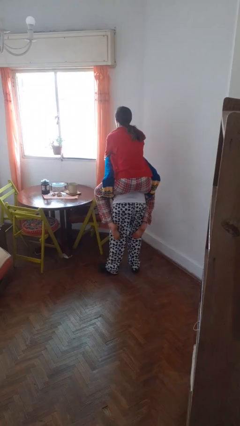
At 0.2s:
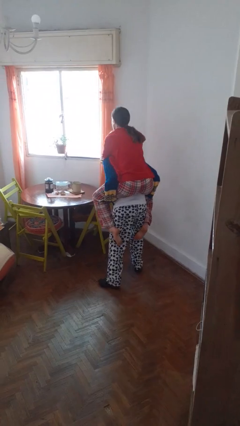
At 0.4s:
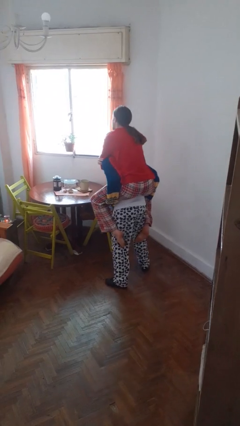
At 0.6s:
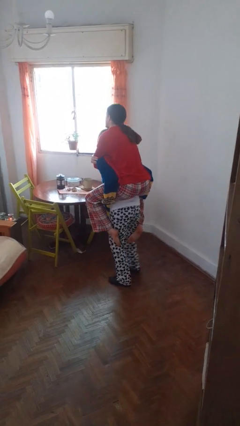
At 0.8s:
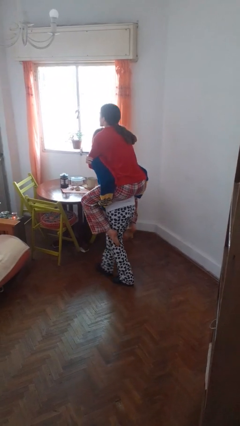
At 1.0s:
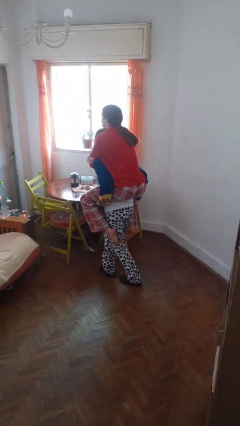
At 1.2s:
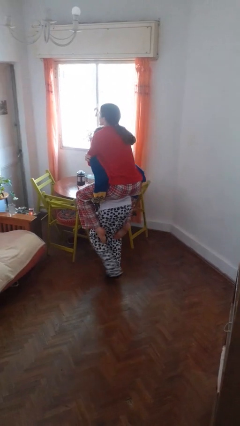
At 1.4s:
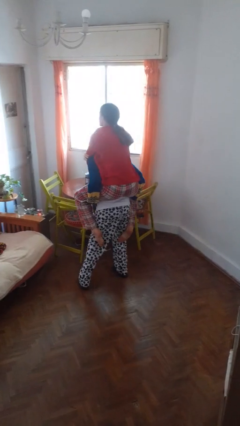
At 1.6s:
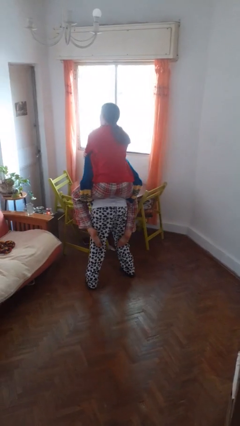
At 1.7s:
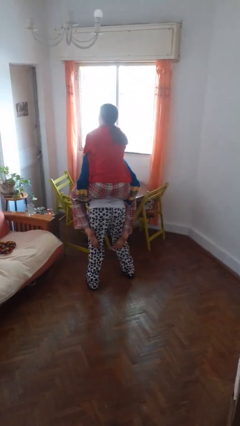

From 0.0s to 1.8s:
person carries person on back

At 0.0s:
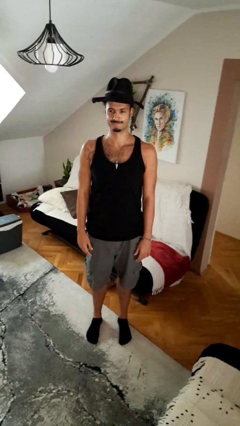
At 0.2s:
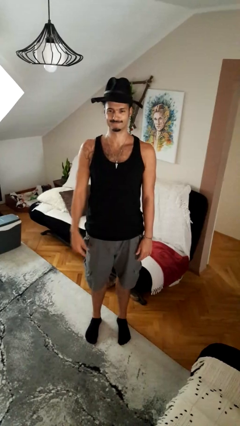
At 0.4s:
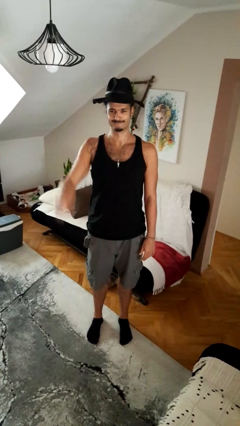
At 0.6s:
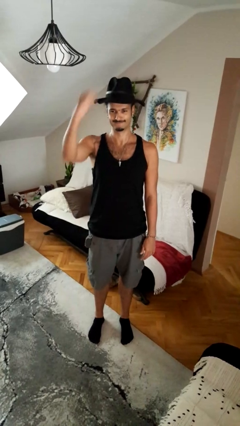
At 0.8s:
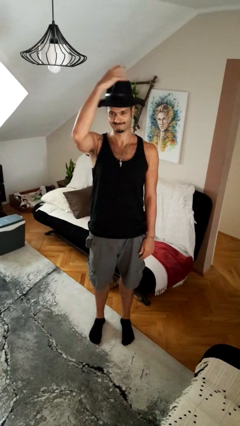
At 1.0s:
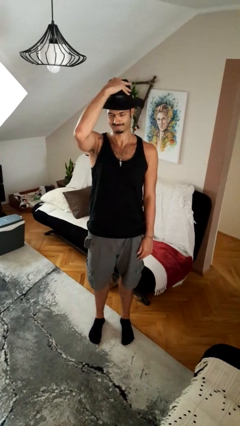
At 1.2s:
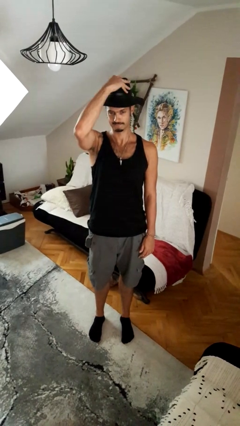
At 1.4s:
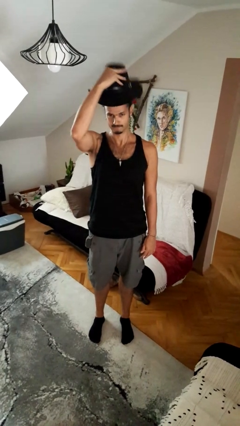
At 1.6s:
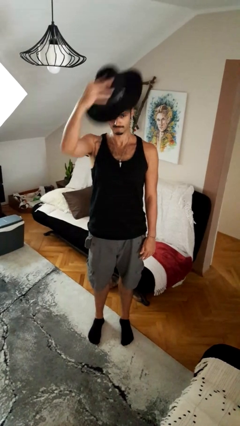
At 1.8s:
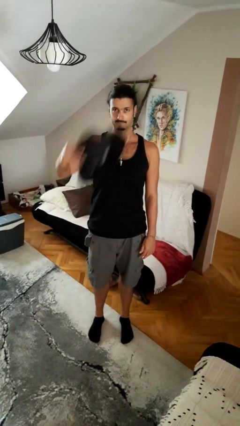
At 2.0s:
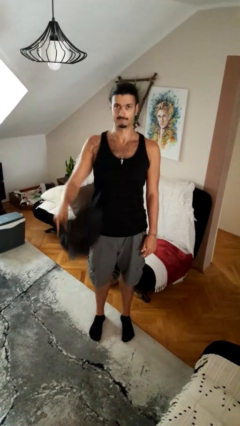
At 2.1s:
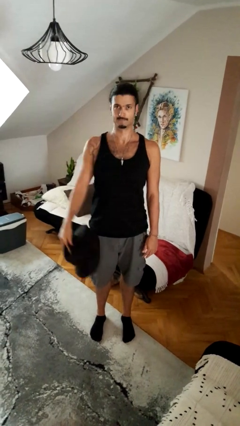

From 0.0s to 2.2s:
person takes off hat

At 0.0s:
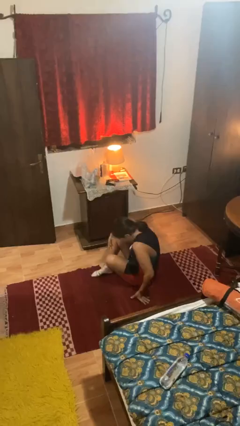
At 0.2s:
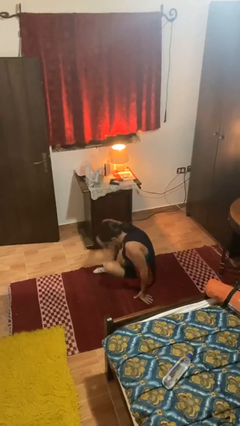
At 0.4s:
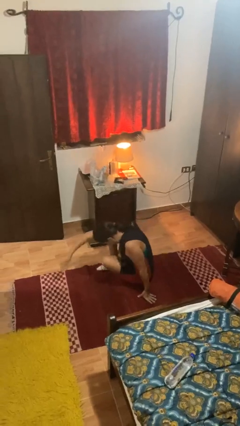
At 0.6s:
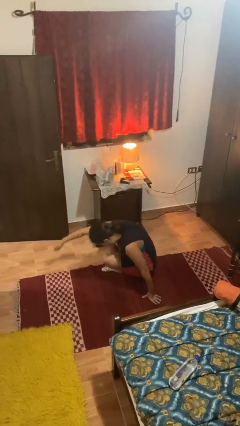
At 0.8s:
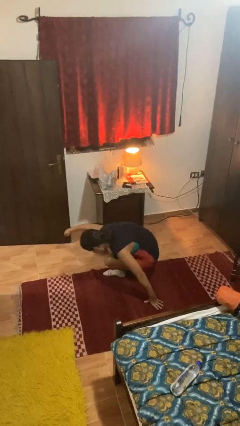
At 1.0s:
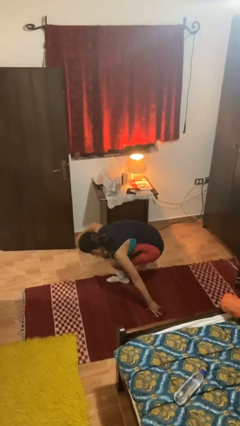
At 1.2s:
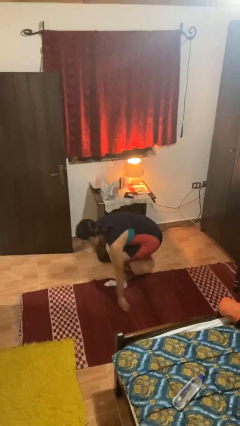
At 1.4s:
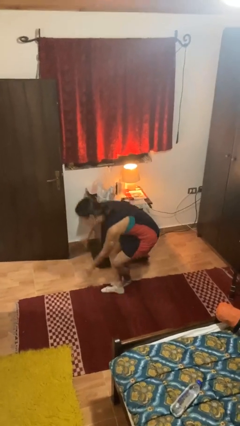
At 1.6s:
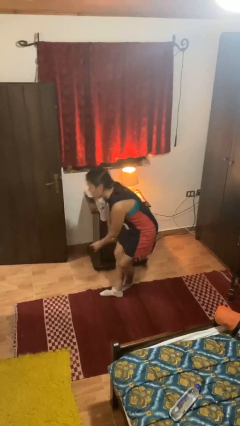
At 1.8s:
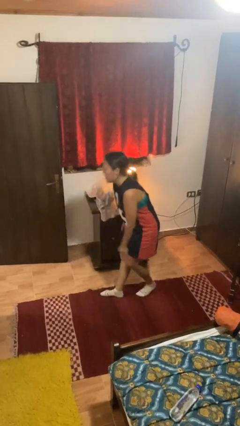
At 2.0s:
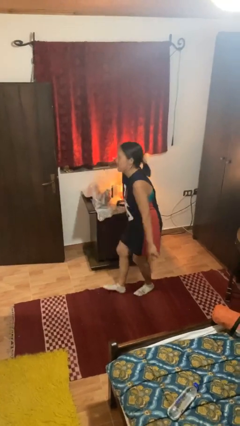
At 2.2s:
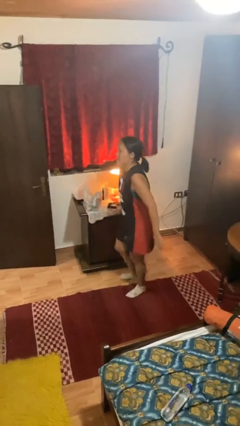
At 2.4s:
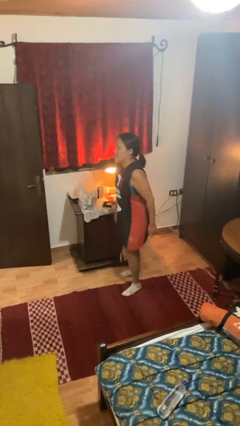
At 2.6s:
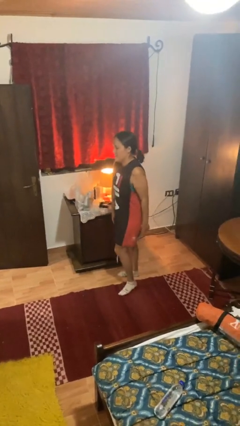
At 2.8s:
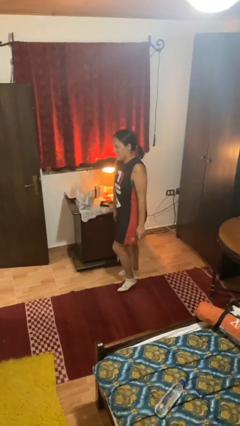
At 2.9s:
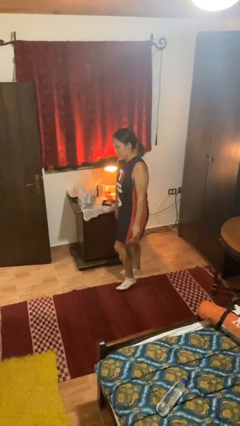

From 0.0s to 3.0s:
person stands up from floor

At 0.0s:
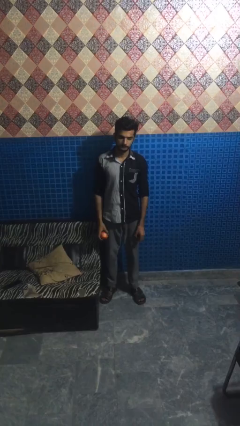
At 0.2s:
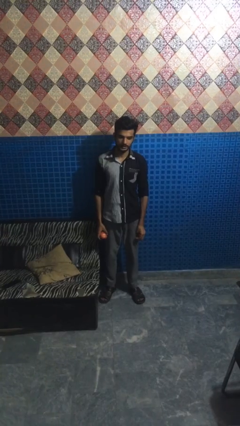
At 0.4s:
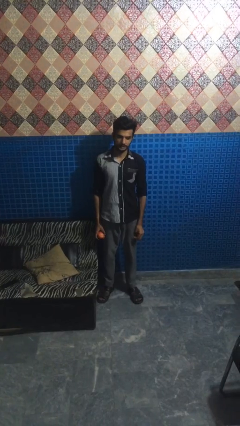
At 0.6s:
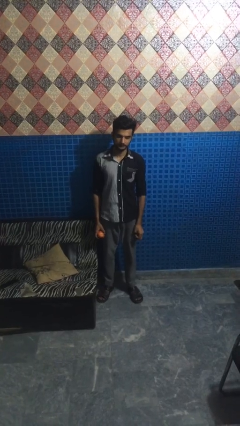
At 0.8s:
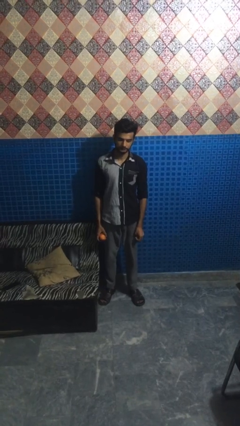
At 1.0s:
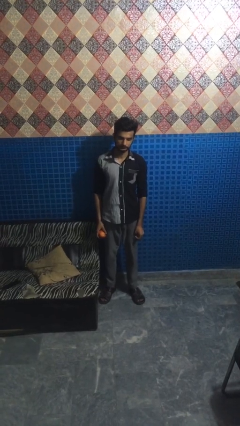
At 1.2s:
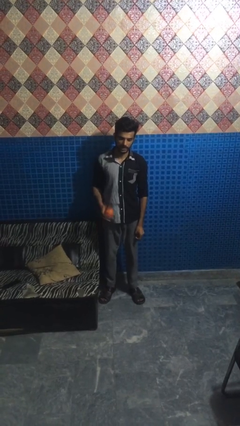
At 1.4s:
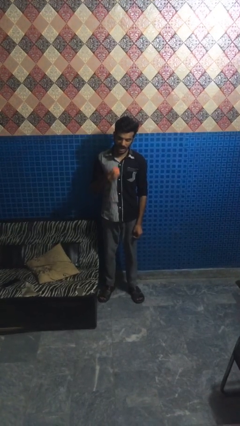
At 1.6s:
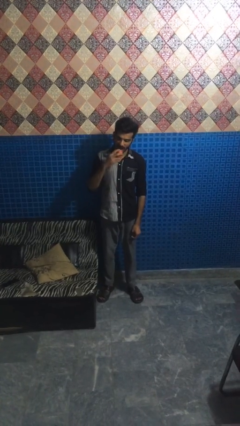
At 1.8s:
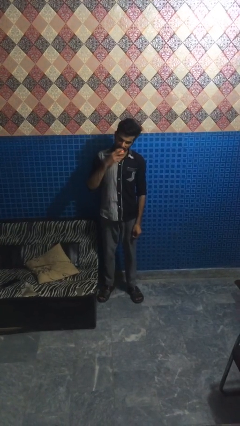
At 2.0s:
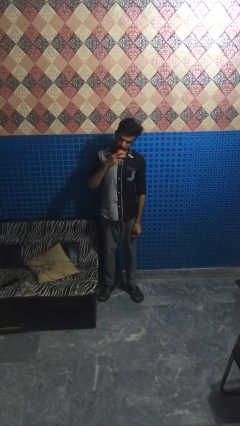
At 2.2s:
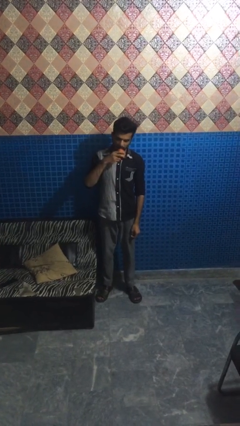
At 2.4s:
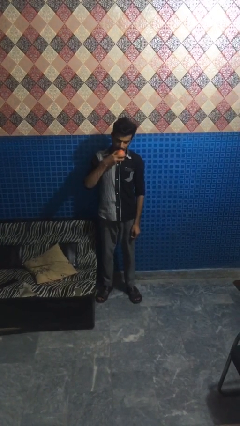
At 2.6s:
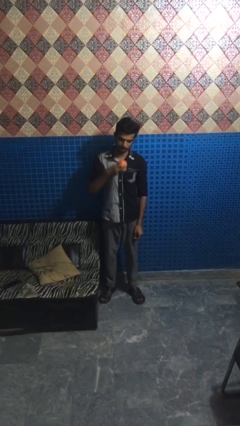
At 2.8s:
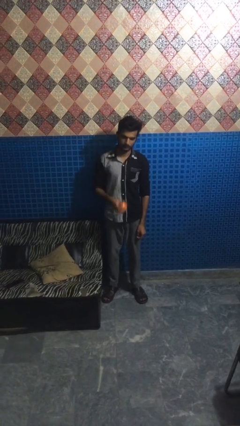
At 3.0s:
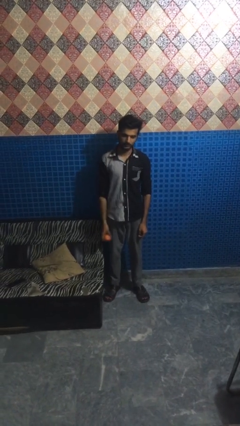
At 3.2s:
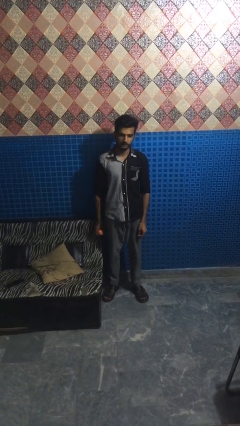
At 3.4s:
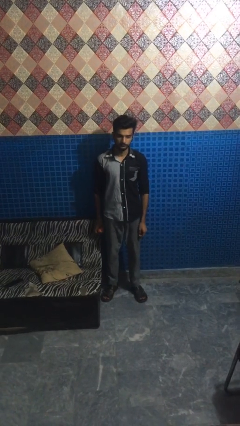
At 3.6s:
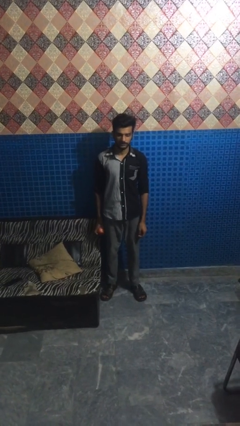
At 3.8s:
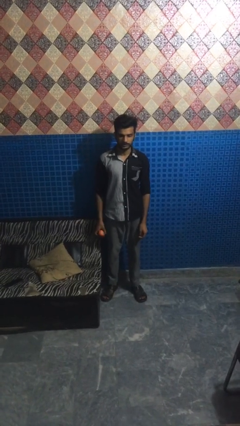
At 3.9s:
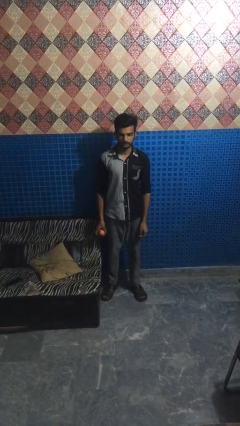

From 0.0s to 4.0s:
person eats apple

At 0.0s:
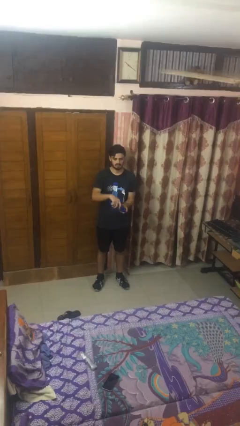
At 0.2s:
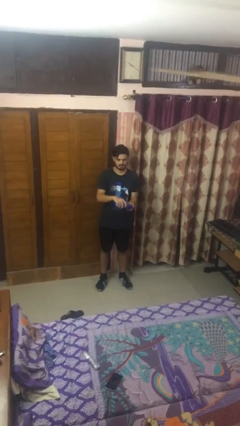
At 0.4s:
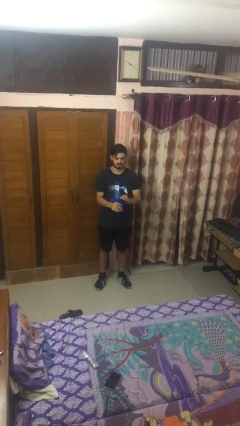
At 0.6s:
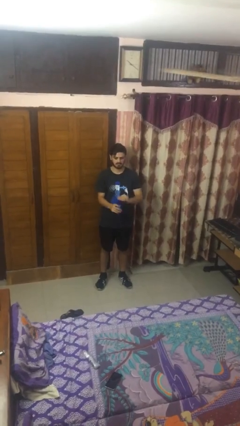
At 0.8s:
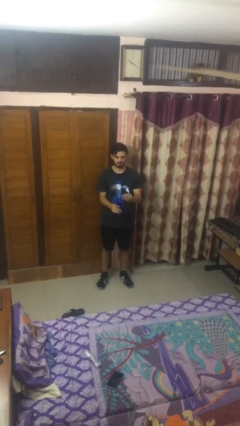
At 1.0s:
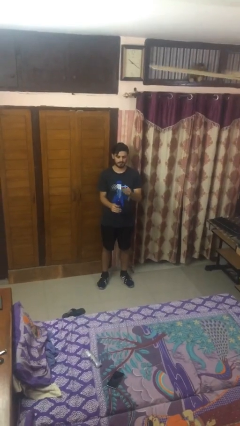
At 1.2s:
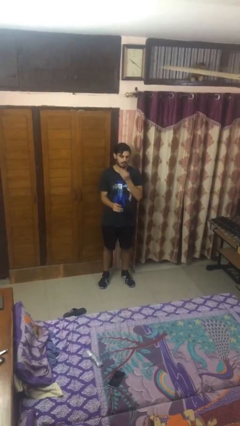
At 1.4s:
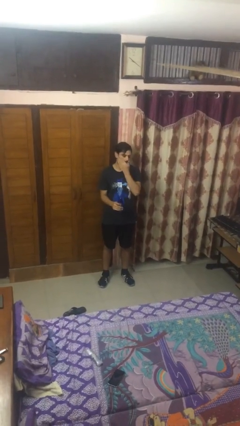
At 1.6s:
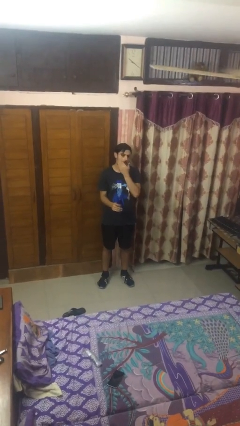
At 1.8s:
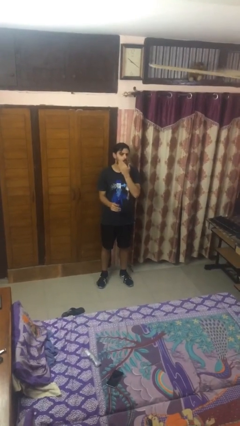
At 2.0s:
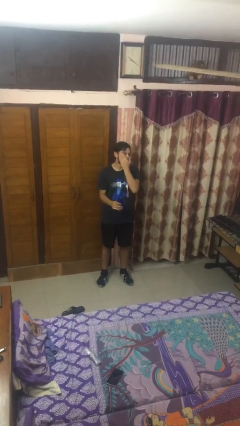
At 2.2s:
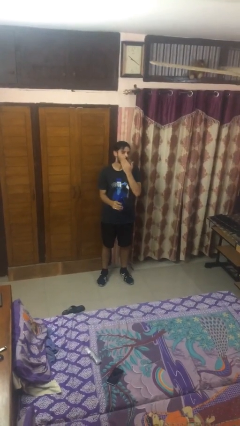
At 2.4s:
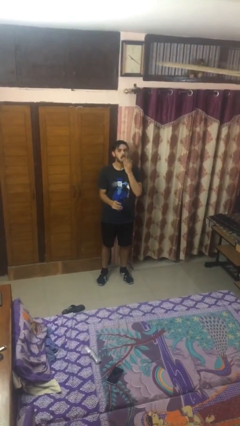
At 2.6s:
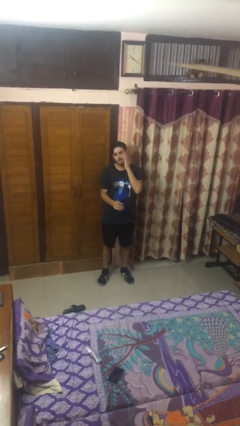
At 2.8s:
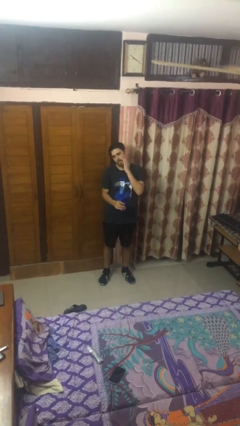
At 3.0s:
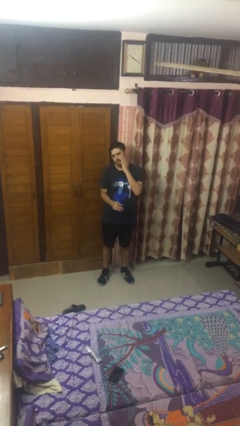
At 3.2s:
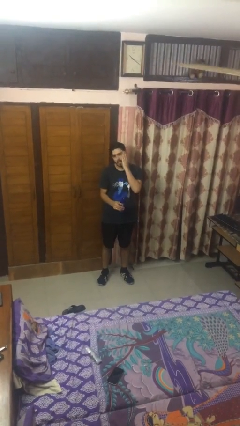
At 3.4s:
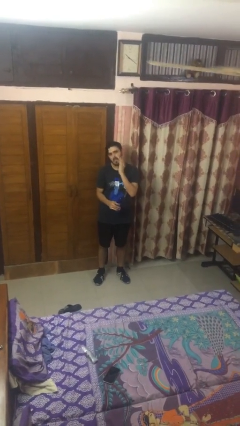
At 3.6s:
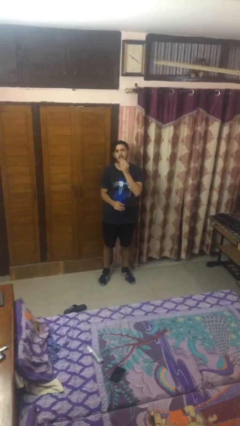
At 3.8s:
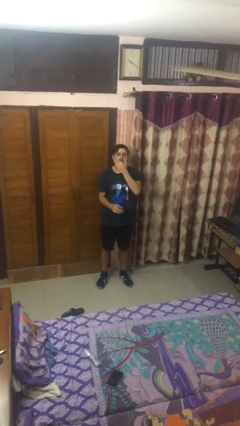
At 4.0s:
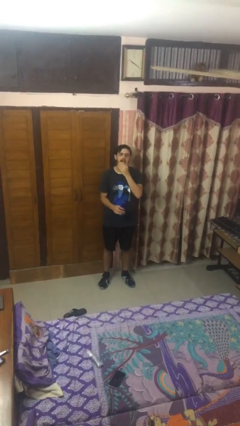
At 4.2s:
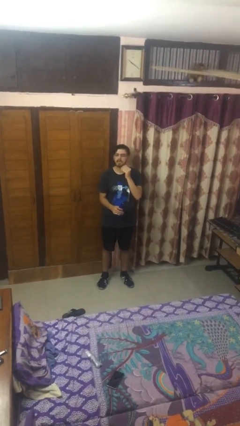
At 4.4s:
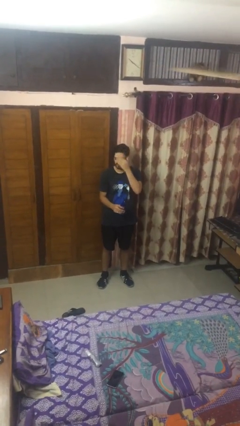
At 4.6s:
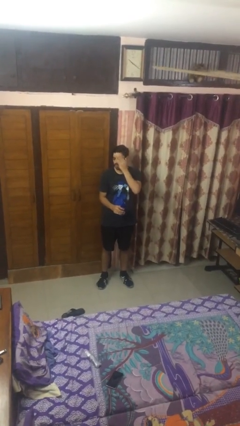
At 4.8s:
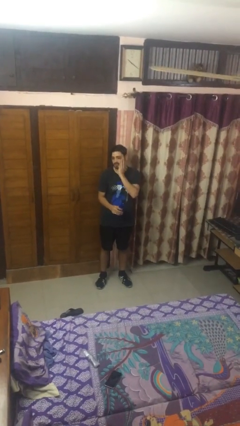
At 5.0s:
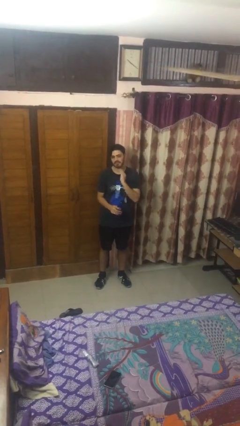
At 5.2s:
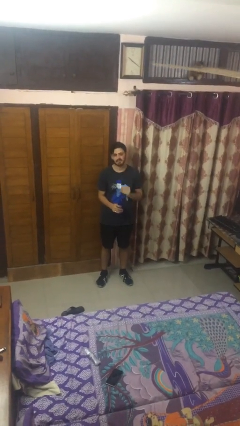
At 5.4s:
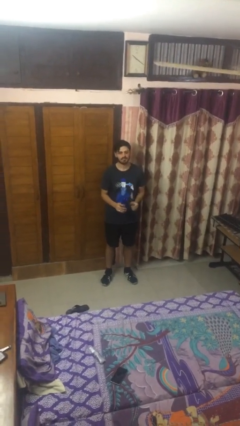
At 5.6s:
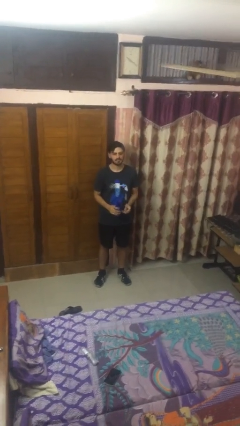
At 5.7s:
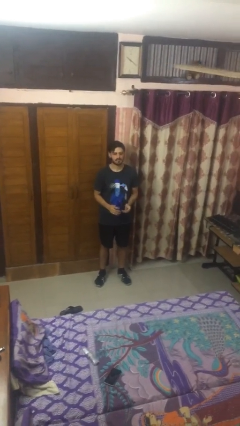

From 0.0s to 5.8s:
person applies sunscreen

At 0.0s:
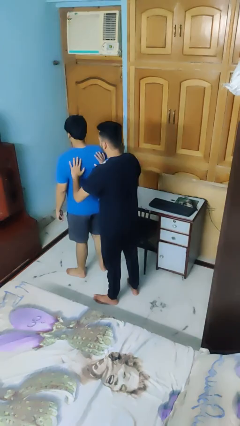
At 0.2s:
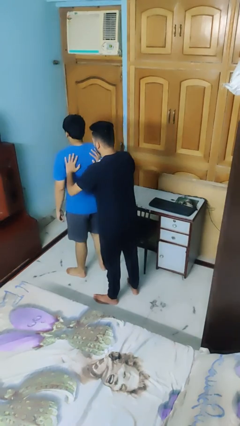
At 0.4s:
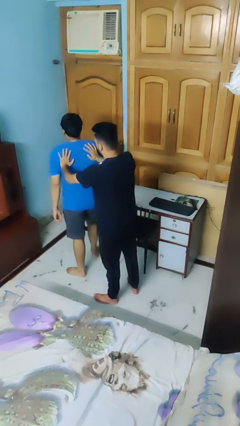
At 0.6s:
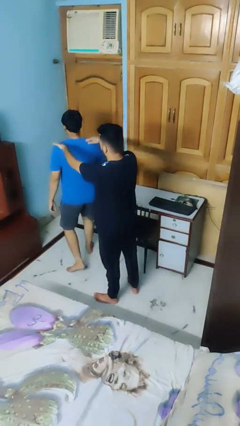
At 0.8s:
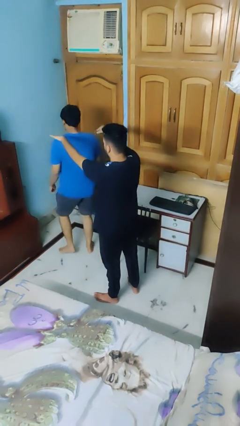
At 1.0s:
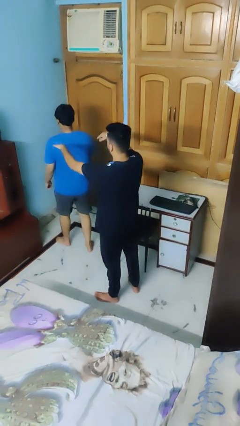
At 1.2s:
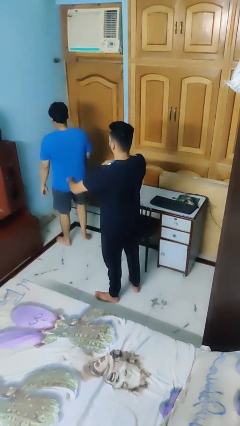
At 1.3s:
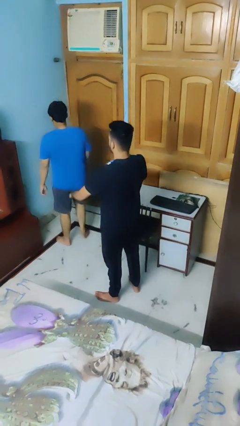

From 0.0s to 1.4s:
person shoves person
